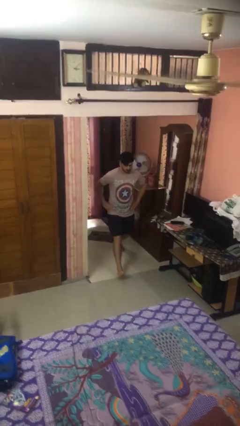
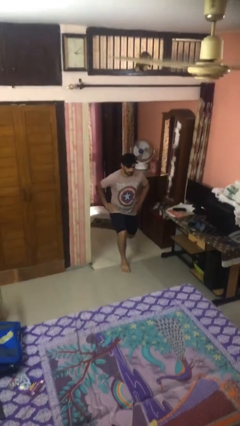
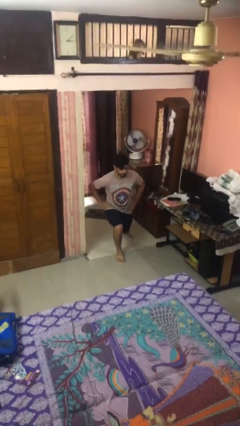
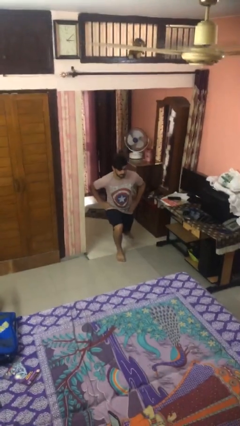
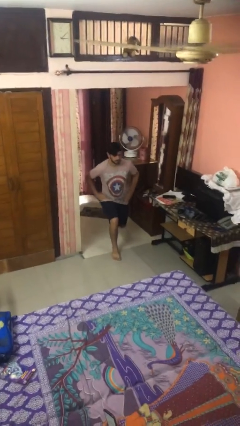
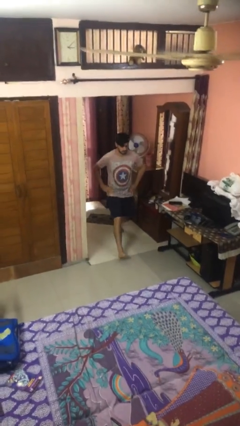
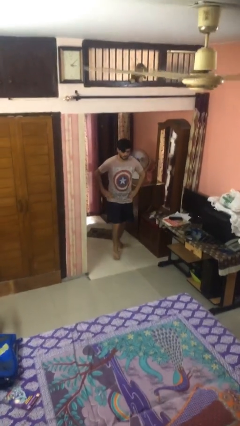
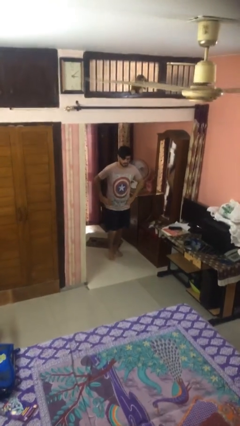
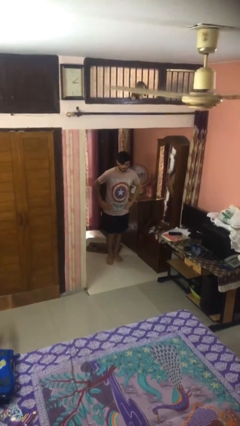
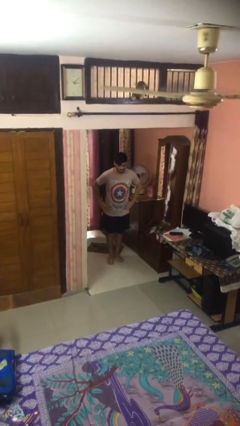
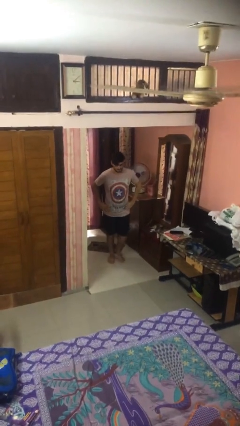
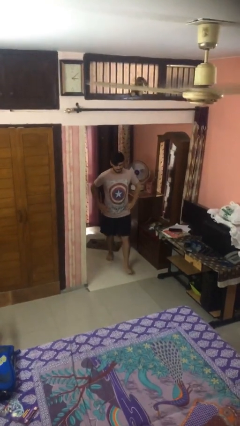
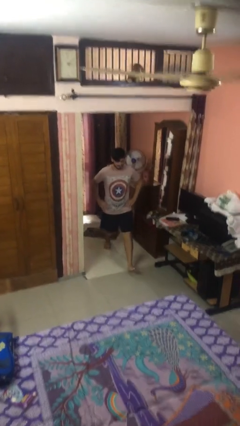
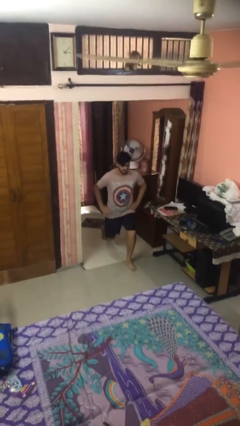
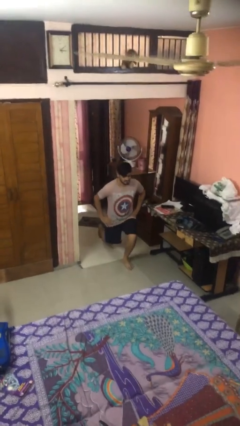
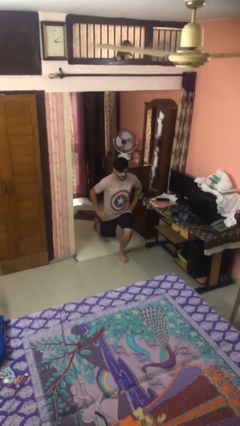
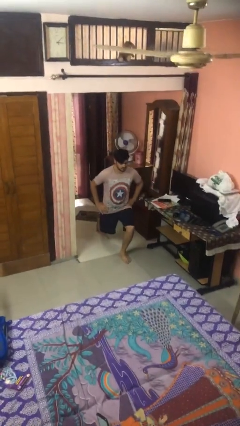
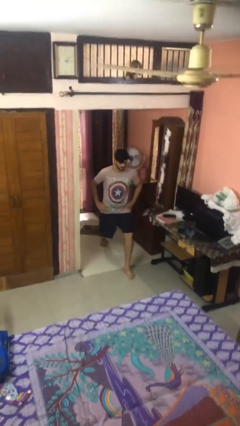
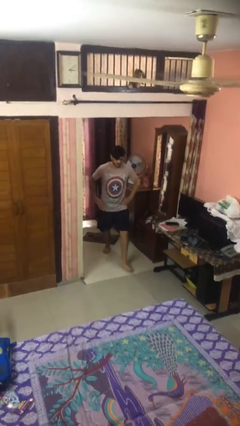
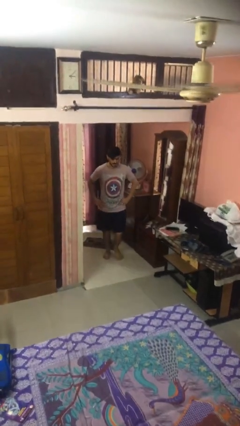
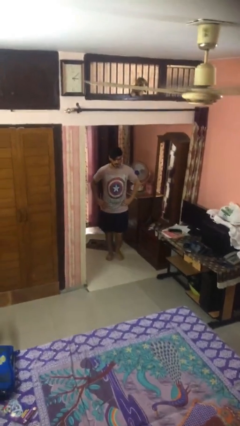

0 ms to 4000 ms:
person exercises with lunges

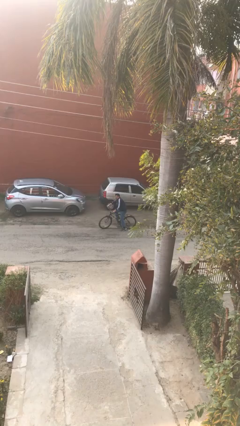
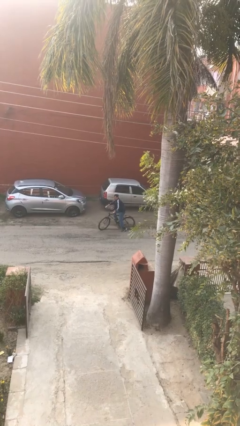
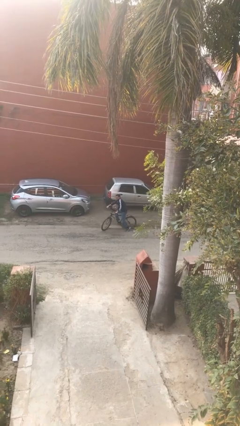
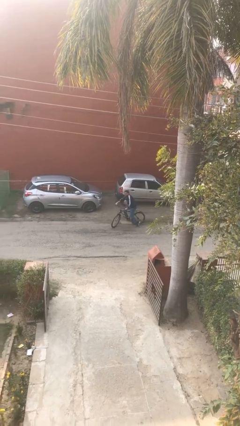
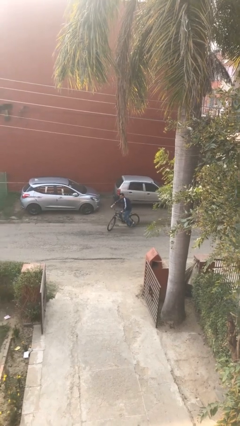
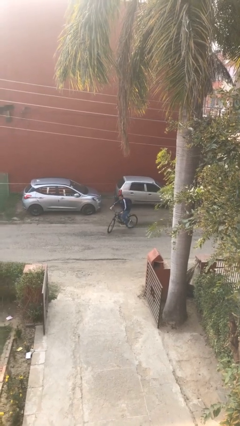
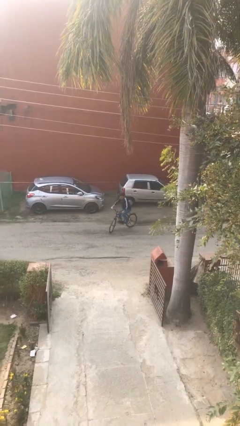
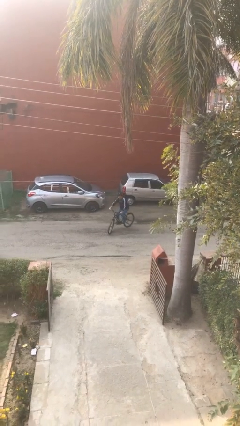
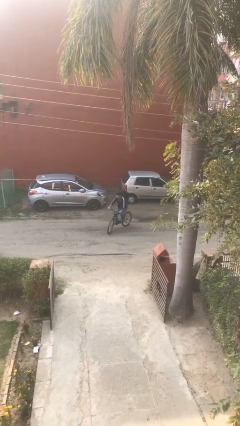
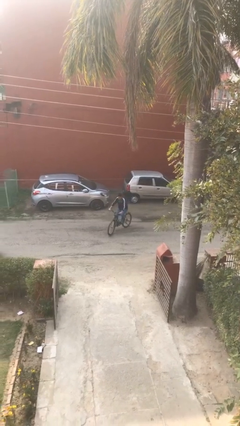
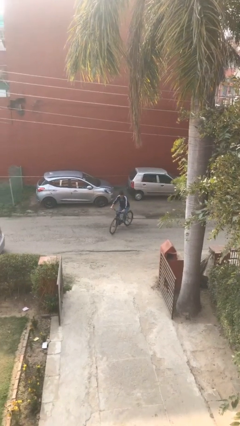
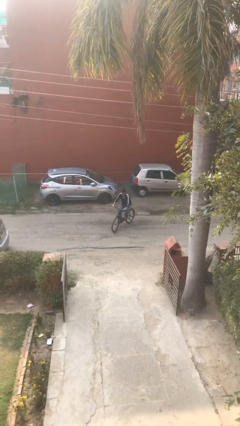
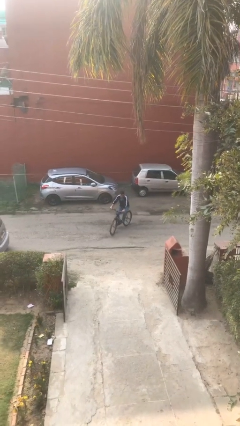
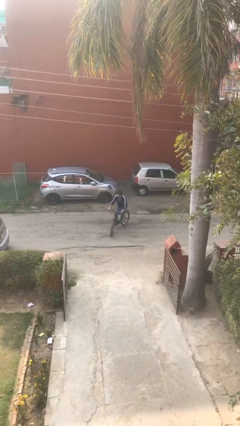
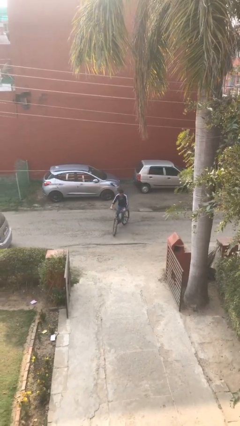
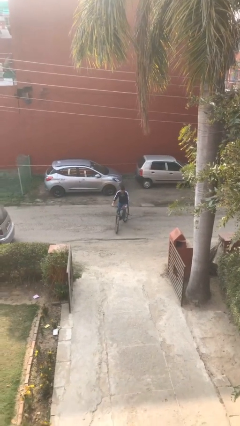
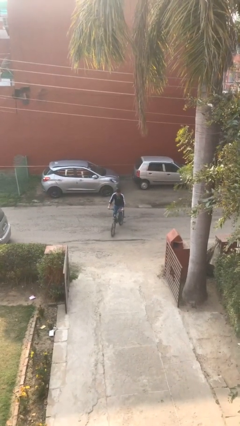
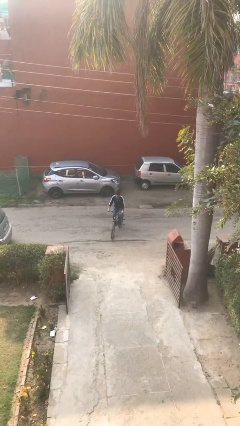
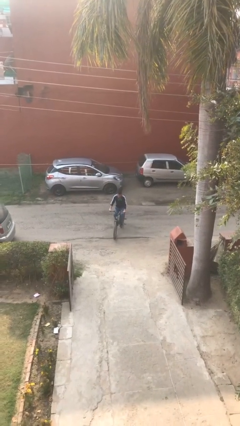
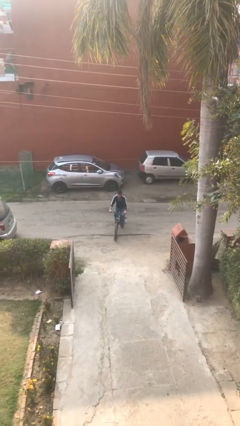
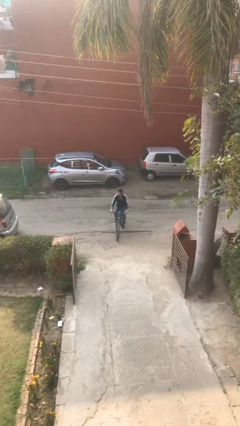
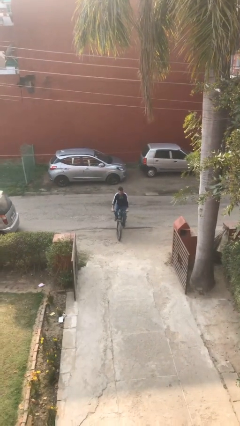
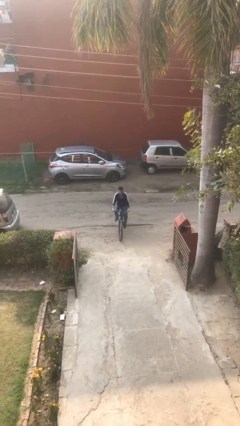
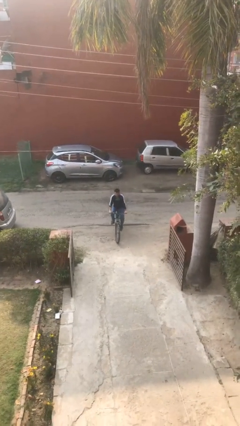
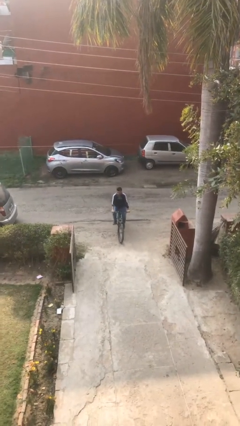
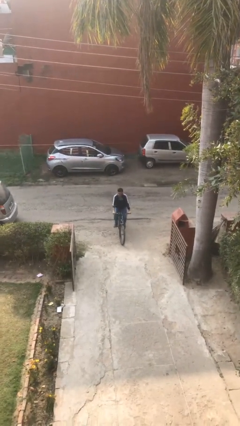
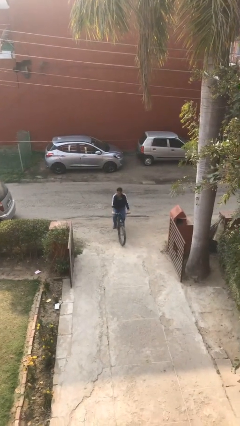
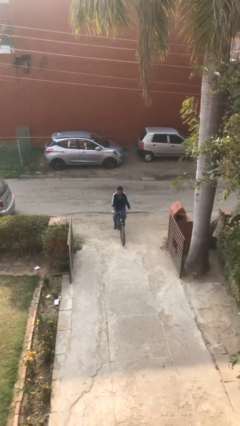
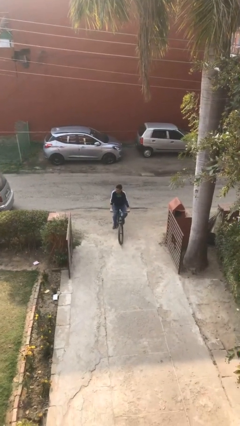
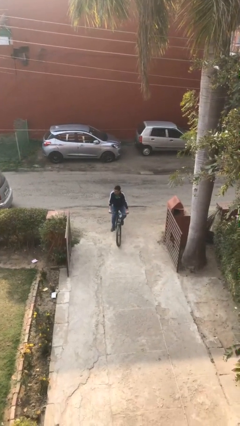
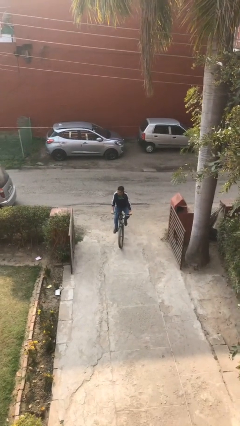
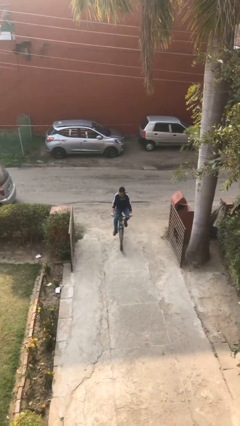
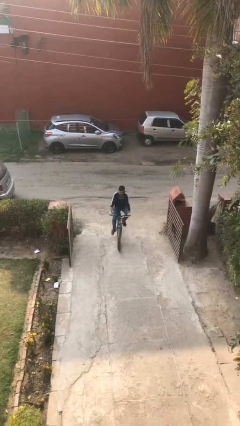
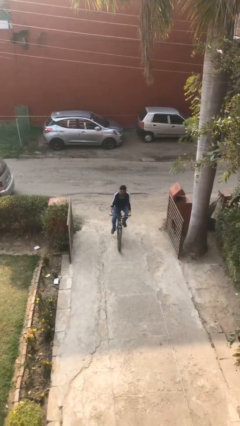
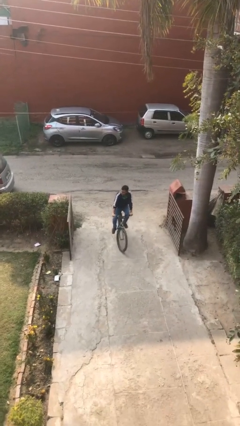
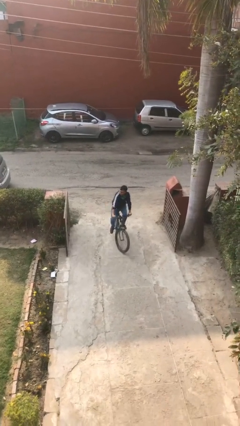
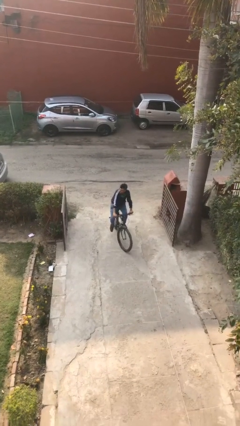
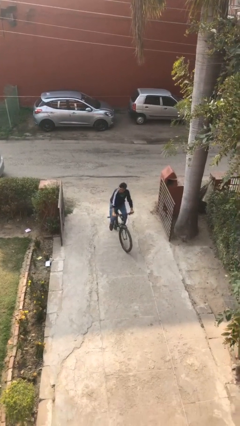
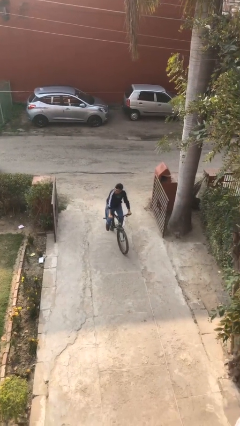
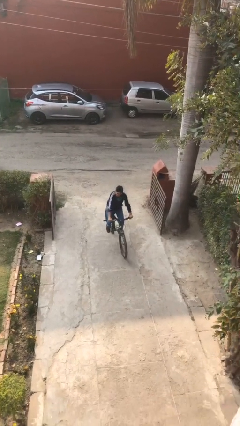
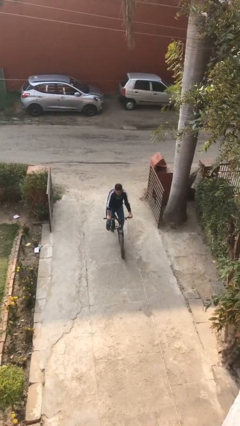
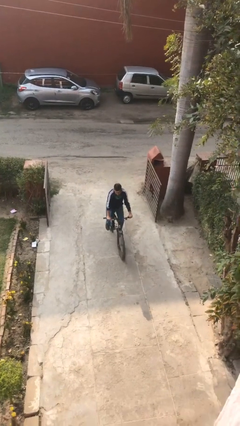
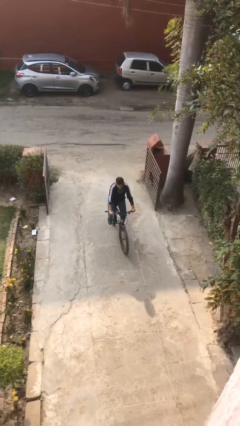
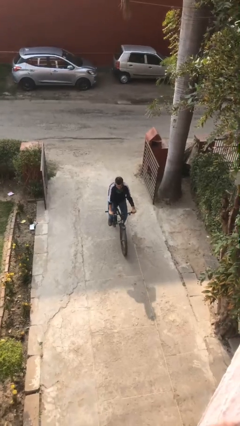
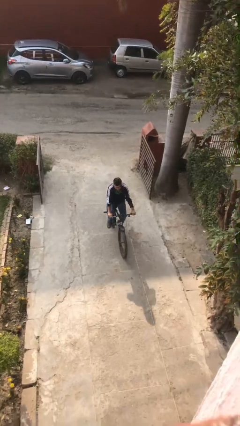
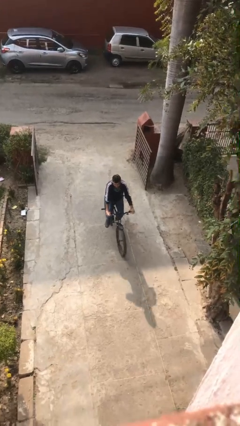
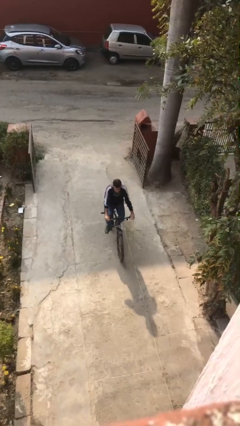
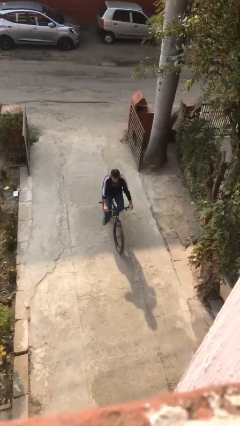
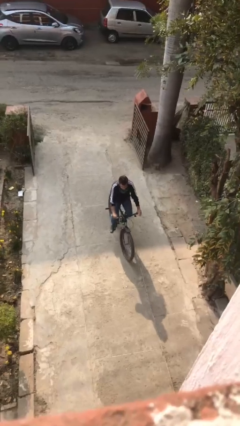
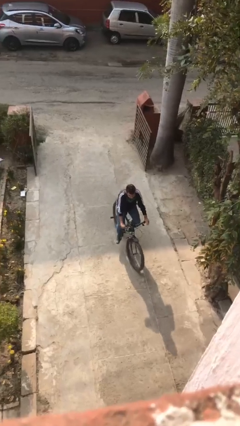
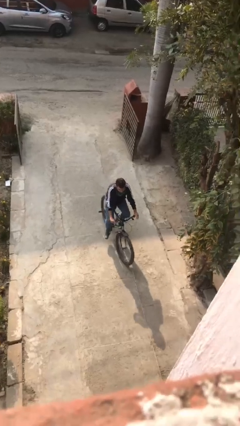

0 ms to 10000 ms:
person rides bicycle

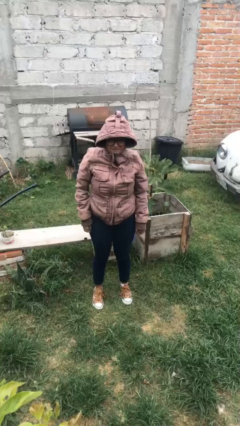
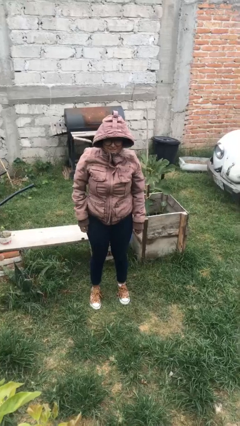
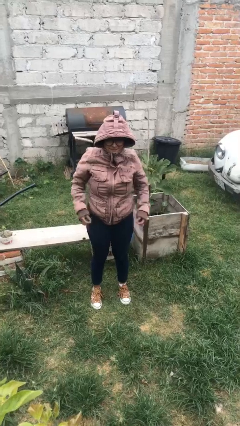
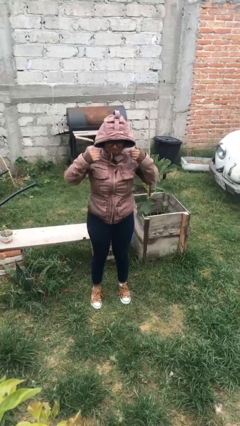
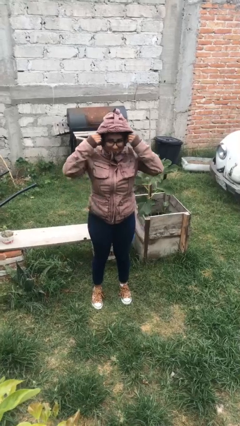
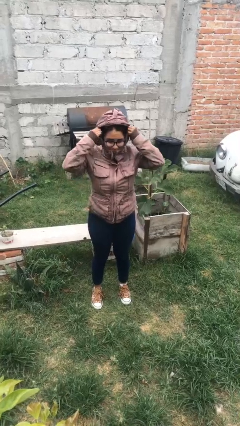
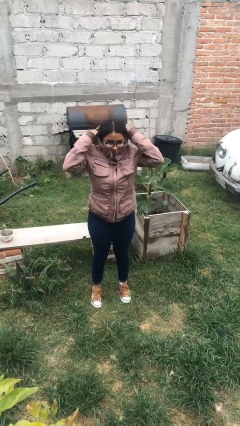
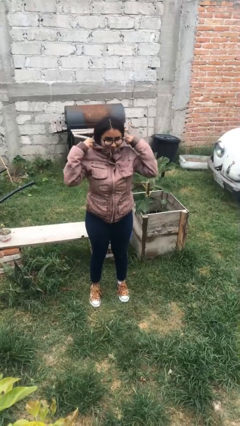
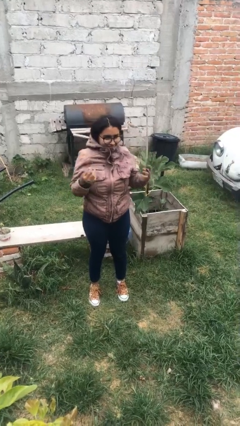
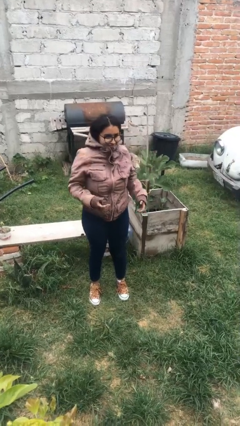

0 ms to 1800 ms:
person takes off hoodie

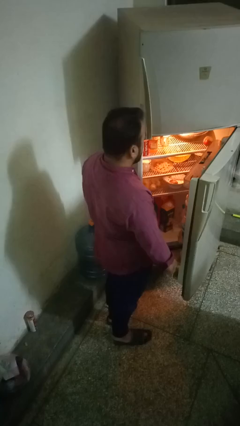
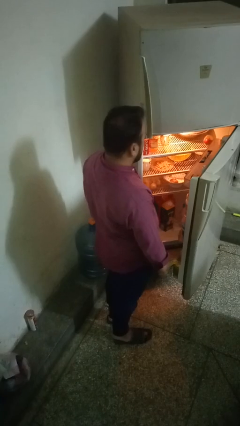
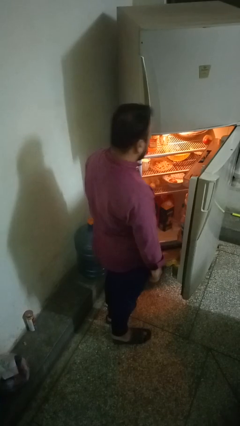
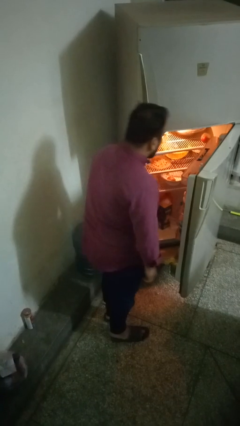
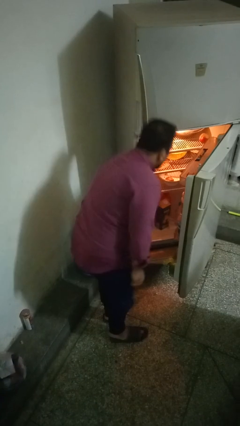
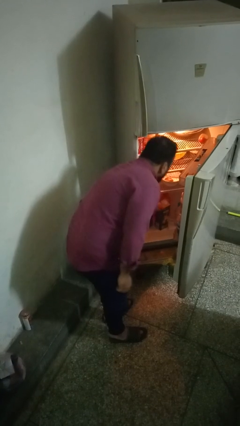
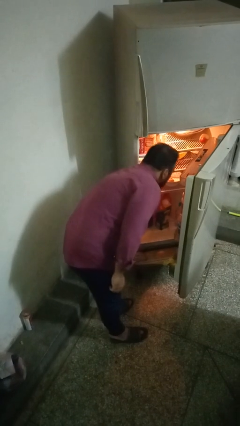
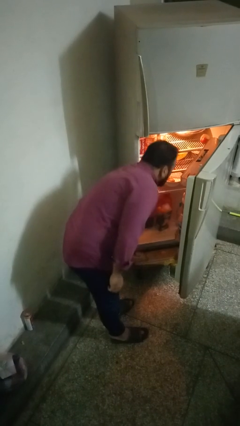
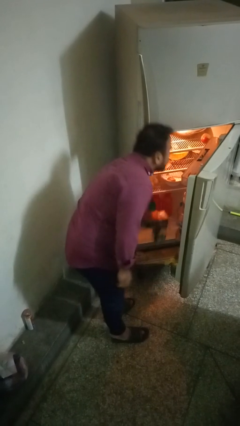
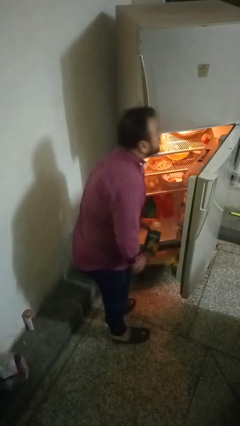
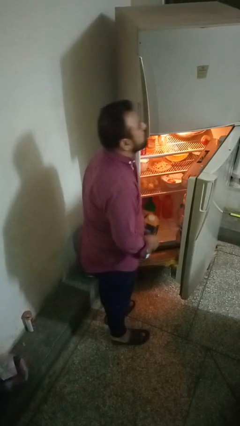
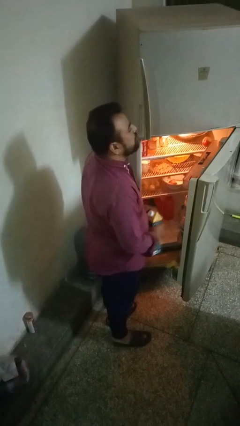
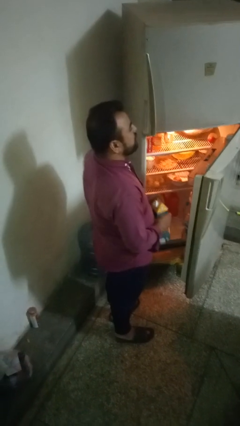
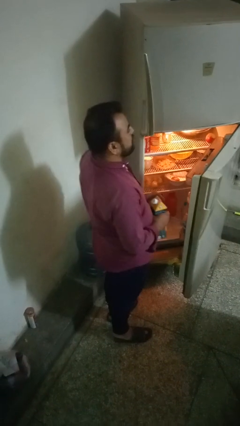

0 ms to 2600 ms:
person takes object from refrigerator
